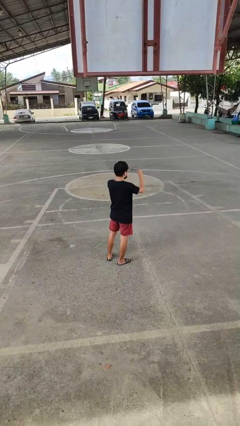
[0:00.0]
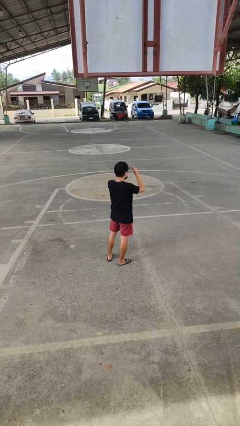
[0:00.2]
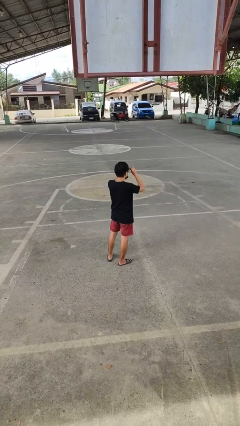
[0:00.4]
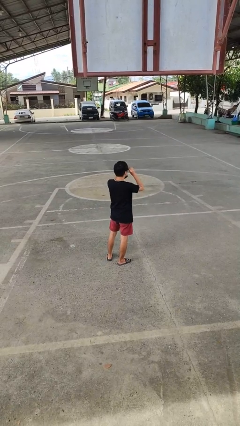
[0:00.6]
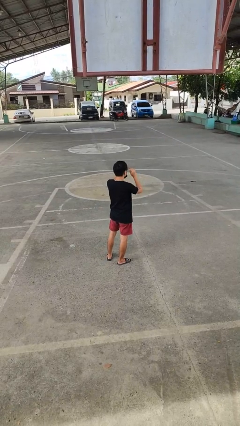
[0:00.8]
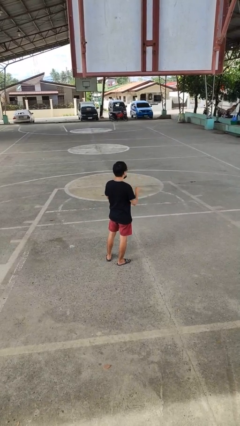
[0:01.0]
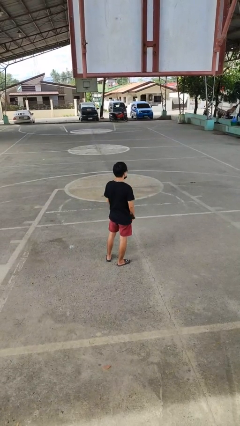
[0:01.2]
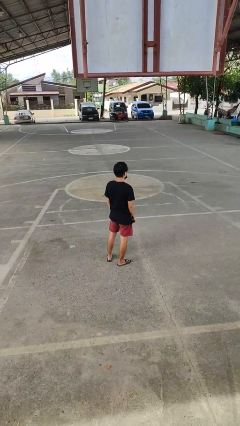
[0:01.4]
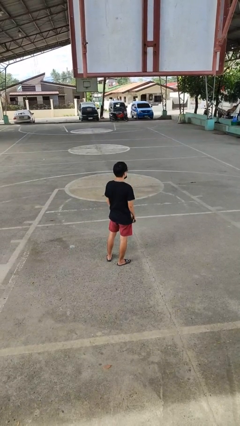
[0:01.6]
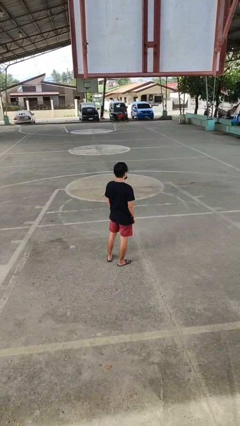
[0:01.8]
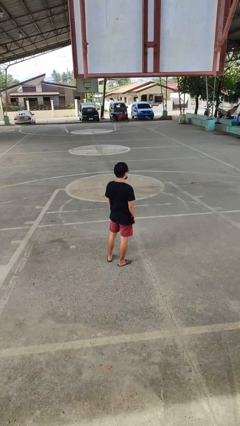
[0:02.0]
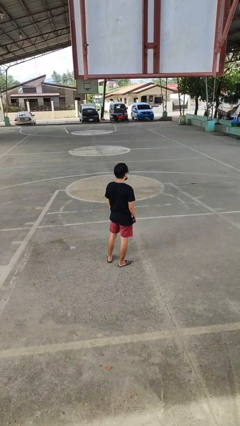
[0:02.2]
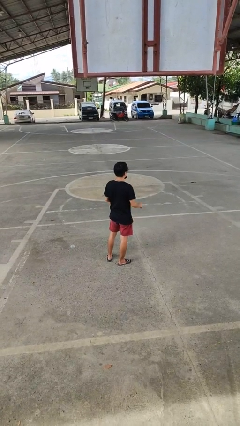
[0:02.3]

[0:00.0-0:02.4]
person puts on glasses

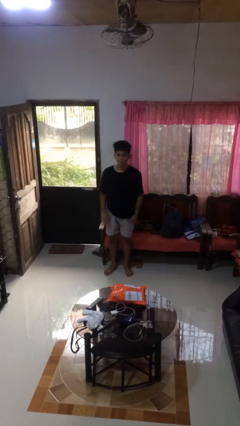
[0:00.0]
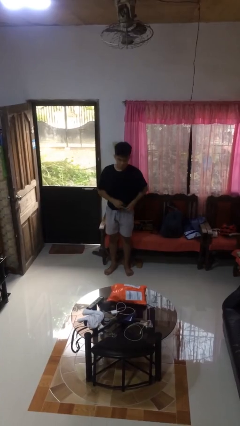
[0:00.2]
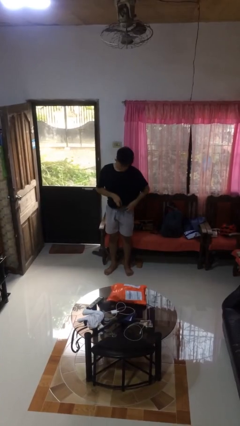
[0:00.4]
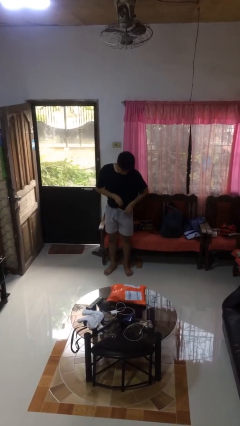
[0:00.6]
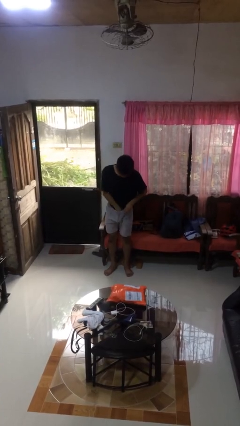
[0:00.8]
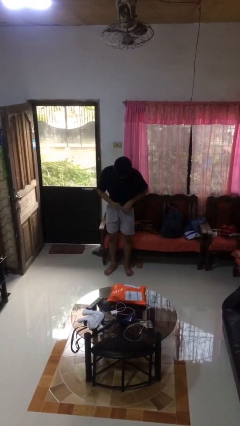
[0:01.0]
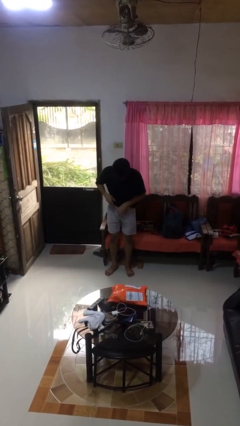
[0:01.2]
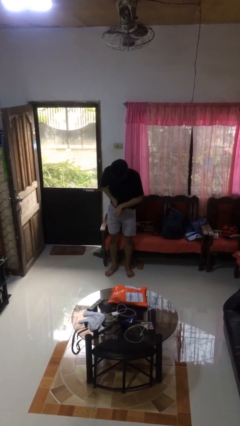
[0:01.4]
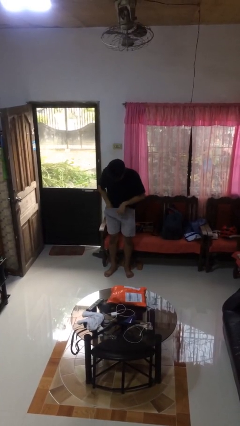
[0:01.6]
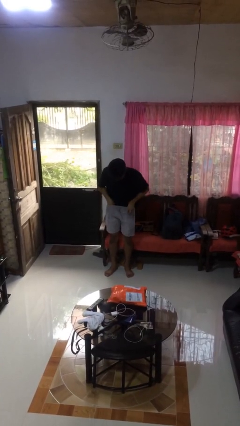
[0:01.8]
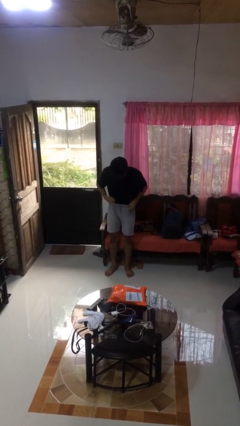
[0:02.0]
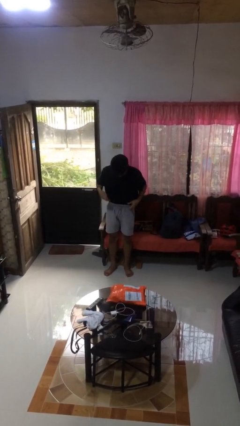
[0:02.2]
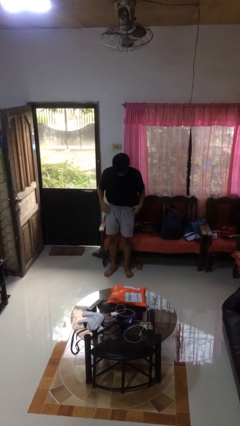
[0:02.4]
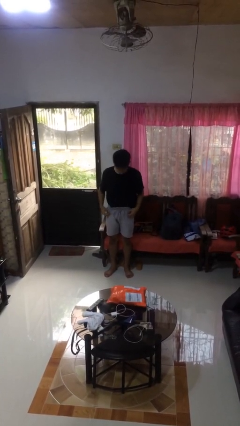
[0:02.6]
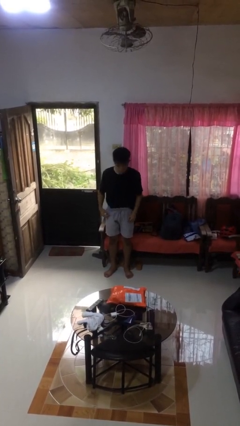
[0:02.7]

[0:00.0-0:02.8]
person tucks in shirt

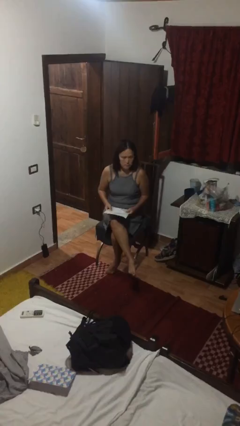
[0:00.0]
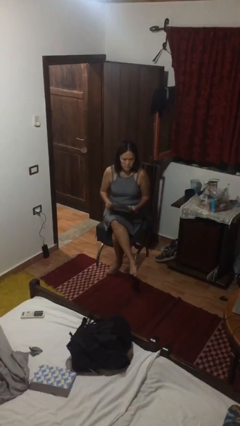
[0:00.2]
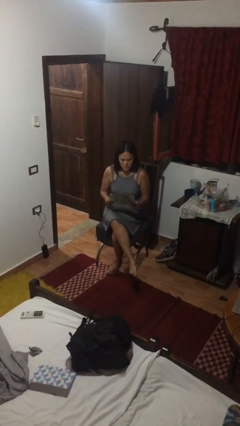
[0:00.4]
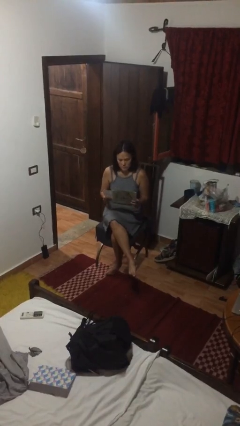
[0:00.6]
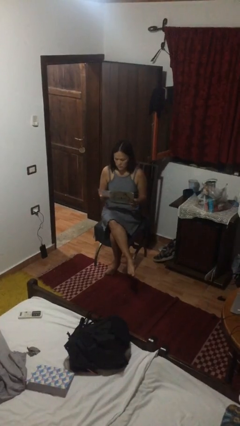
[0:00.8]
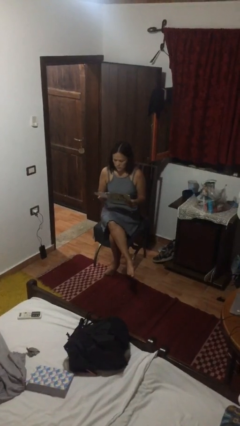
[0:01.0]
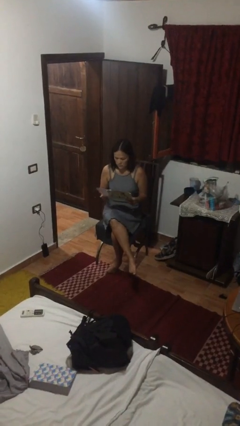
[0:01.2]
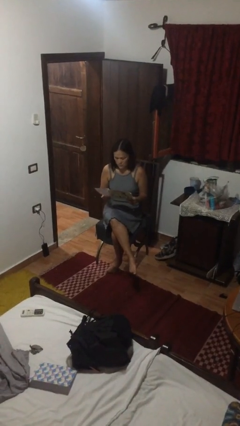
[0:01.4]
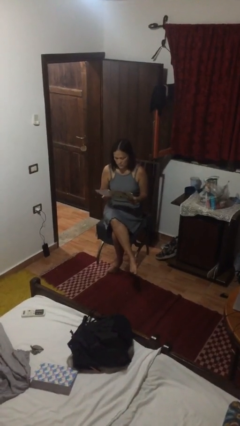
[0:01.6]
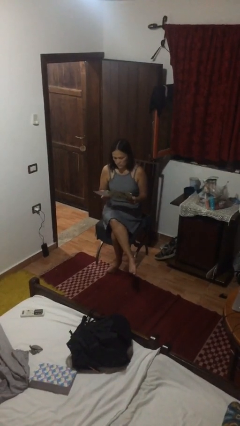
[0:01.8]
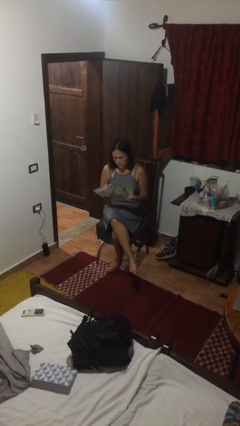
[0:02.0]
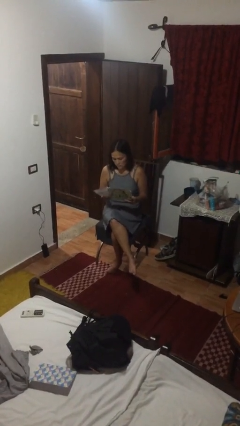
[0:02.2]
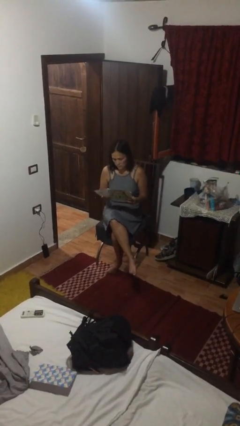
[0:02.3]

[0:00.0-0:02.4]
person reads newspaper

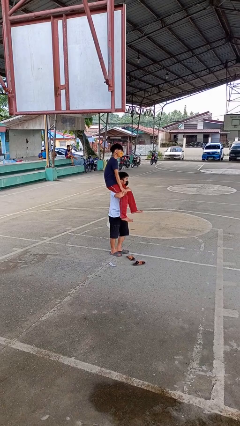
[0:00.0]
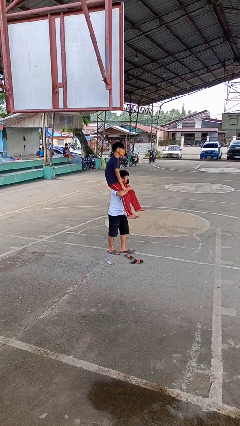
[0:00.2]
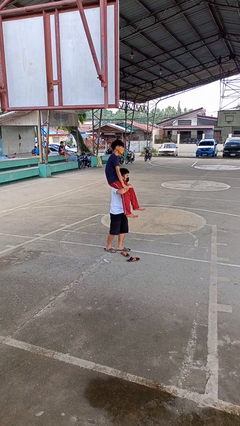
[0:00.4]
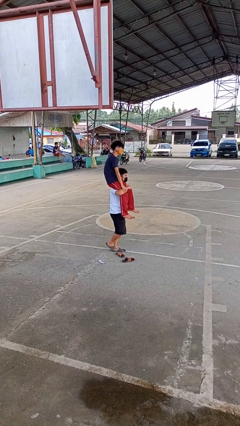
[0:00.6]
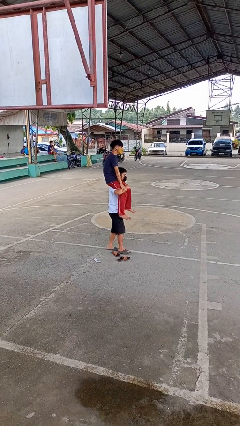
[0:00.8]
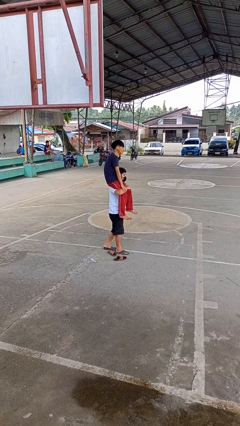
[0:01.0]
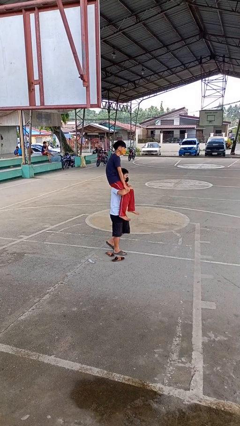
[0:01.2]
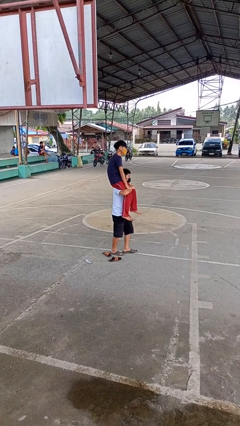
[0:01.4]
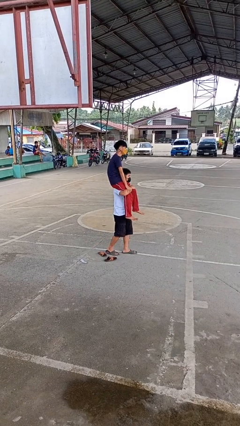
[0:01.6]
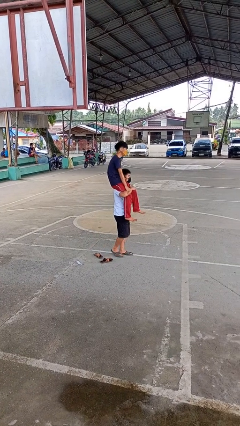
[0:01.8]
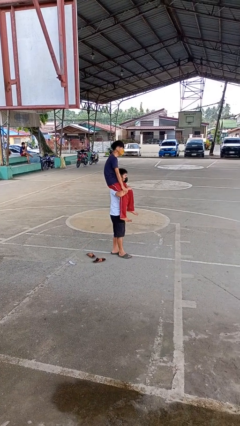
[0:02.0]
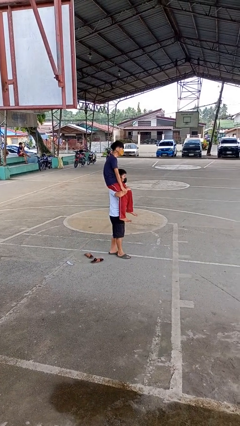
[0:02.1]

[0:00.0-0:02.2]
person carries person on shoulders

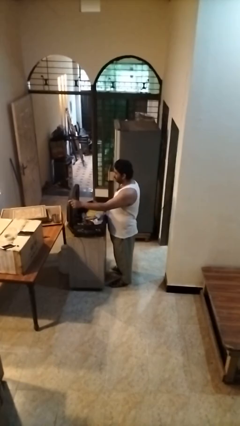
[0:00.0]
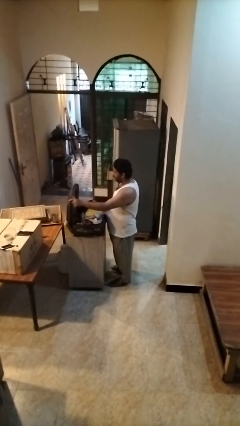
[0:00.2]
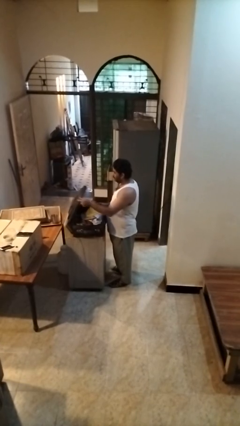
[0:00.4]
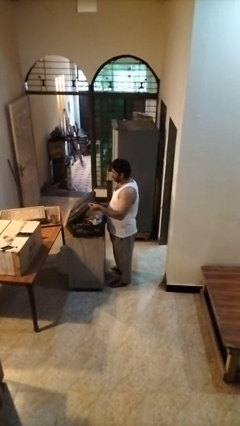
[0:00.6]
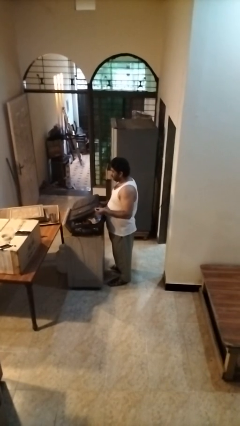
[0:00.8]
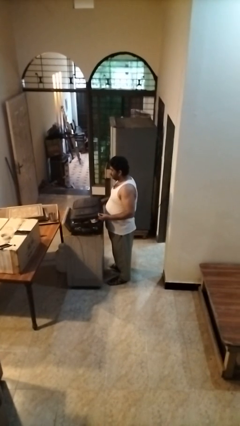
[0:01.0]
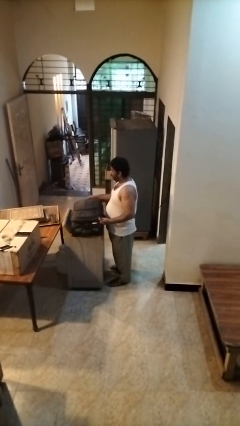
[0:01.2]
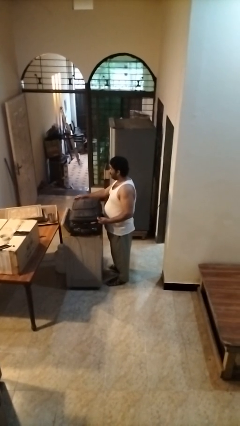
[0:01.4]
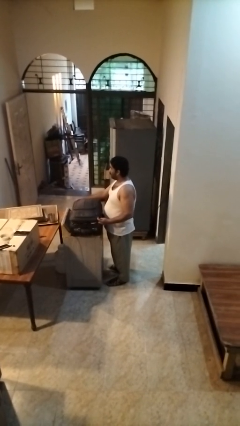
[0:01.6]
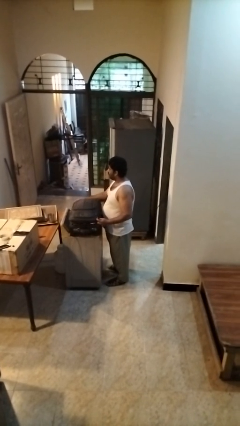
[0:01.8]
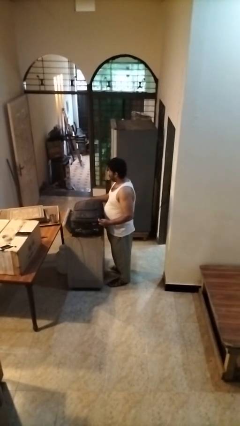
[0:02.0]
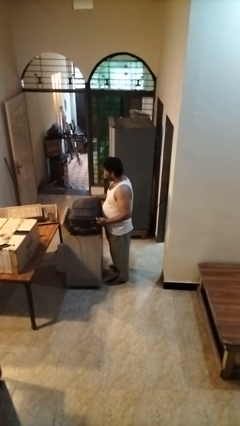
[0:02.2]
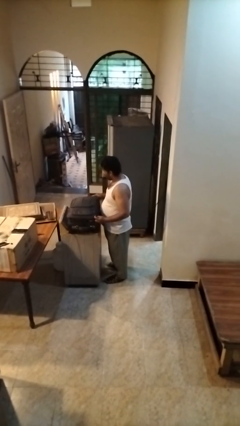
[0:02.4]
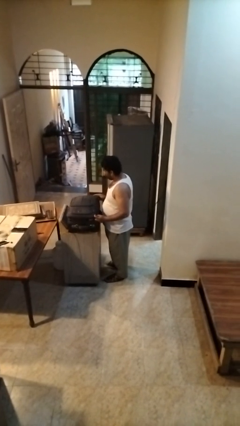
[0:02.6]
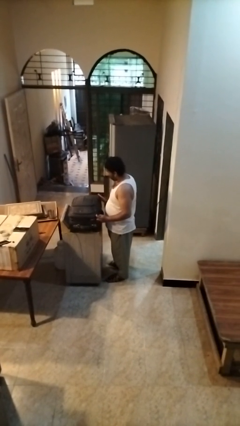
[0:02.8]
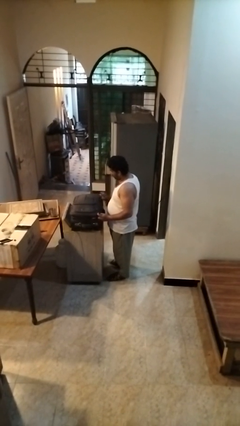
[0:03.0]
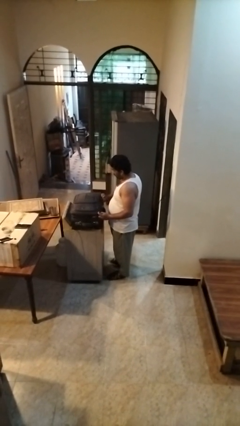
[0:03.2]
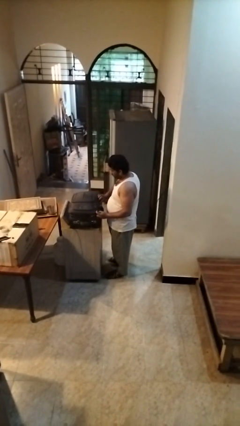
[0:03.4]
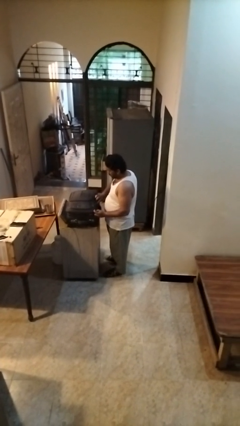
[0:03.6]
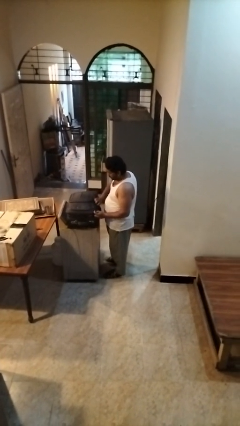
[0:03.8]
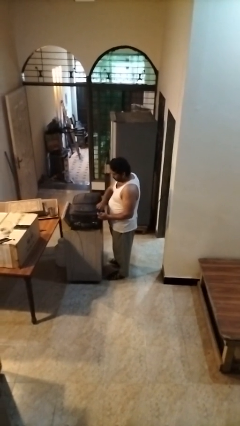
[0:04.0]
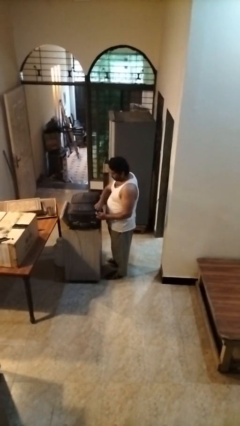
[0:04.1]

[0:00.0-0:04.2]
person closes suitcase

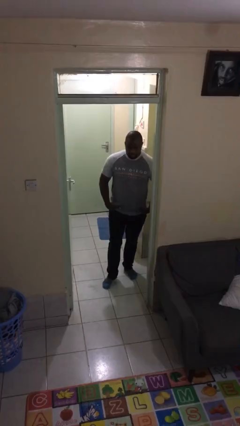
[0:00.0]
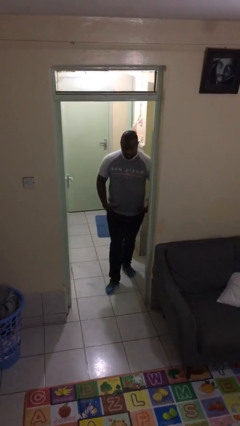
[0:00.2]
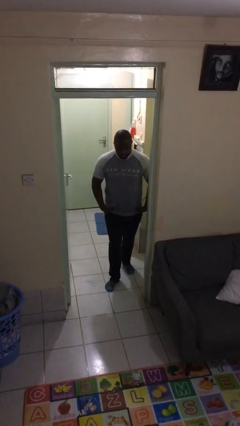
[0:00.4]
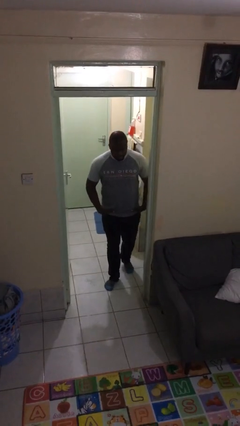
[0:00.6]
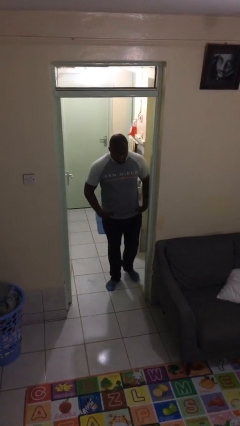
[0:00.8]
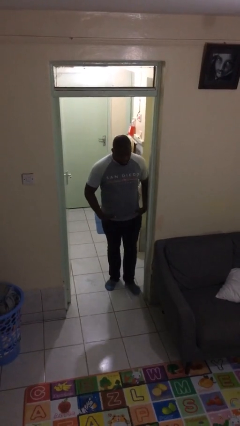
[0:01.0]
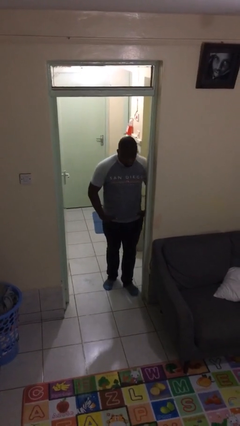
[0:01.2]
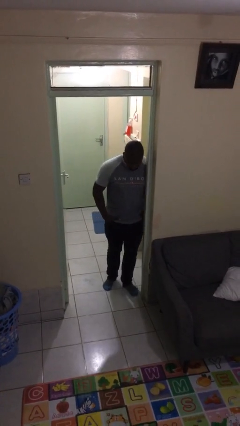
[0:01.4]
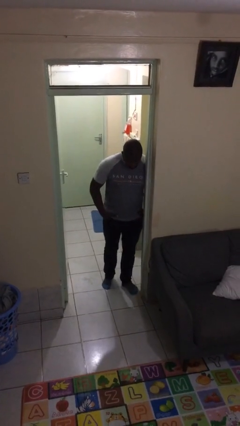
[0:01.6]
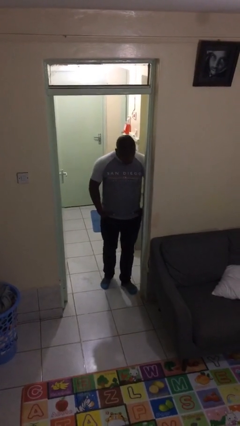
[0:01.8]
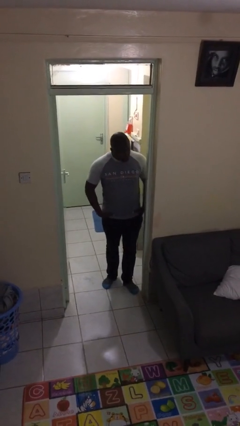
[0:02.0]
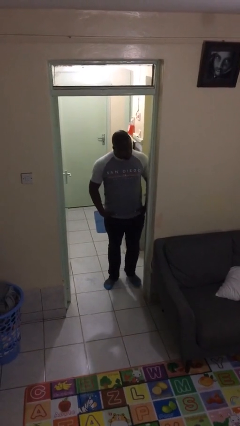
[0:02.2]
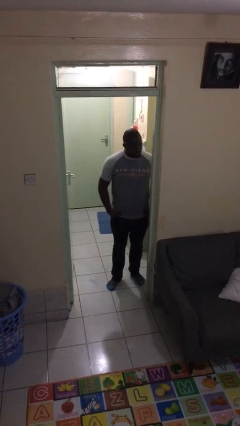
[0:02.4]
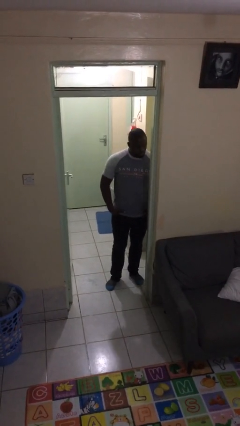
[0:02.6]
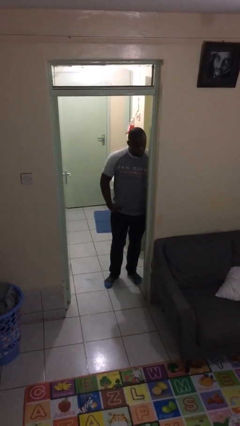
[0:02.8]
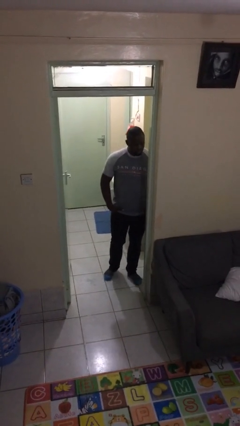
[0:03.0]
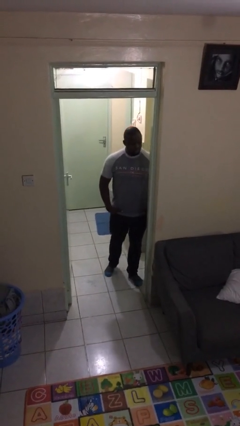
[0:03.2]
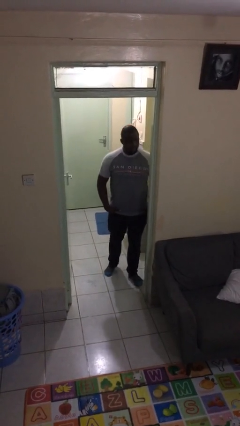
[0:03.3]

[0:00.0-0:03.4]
person bumps into wall
